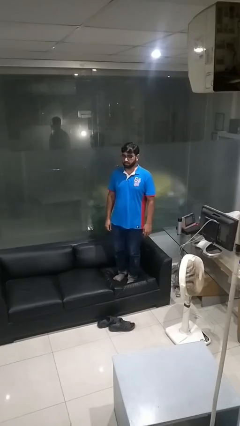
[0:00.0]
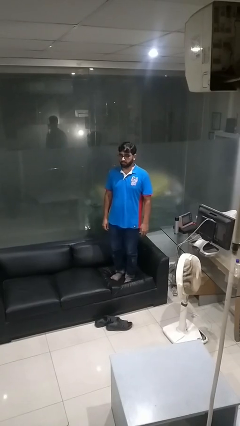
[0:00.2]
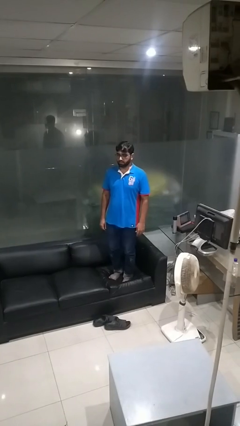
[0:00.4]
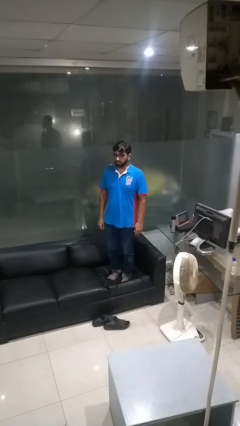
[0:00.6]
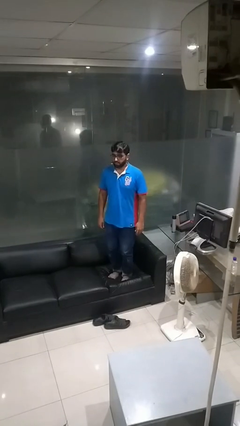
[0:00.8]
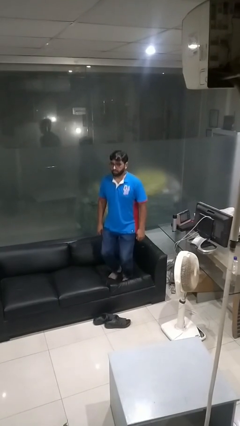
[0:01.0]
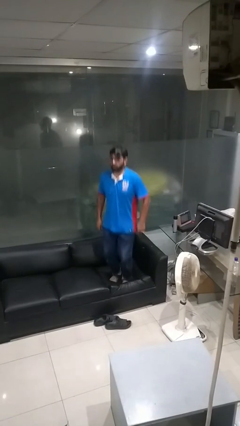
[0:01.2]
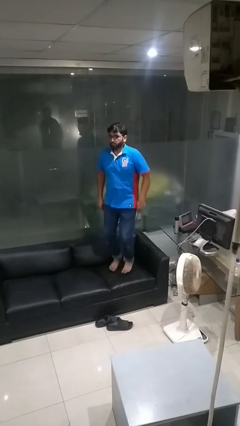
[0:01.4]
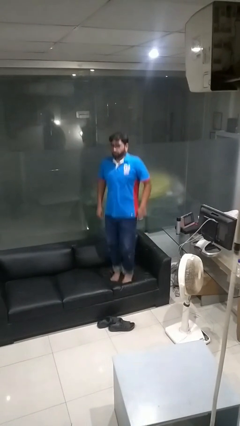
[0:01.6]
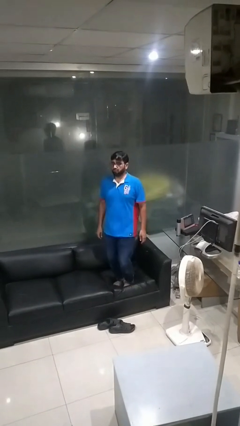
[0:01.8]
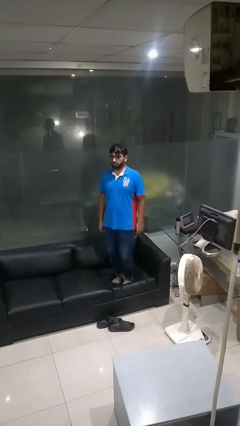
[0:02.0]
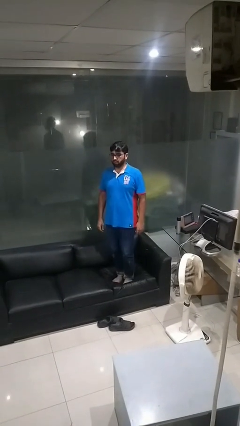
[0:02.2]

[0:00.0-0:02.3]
person jumps on couch

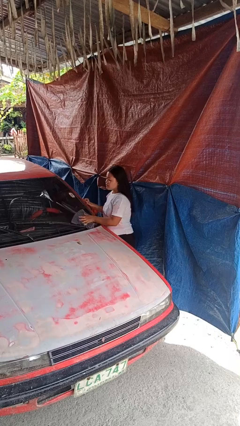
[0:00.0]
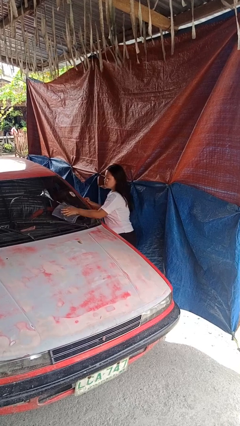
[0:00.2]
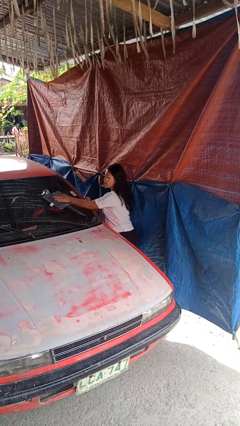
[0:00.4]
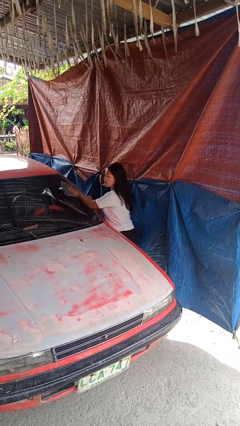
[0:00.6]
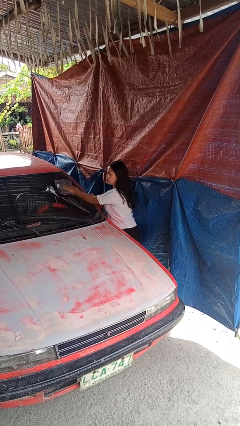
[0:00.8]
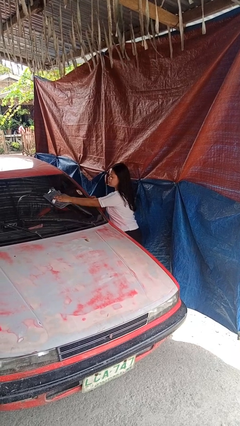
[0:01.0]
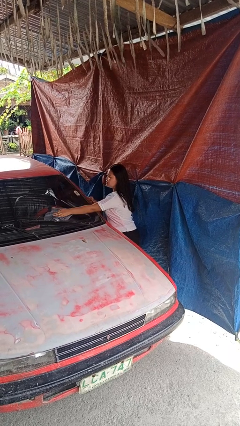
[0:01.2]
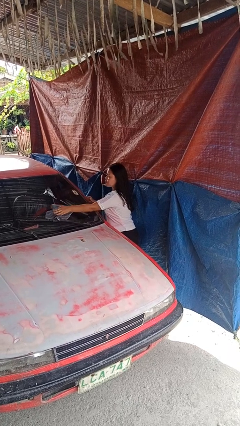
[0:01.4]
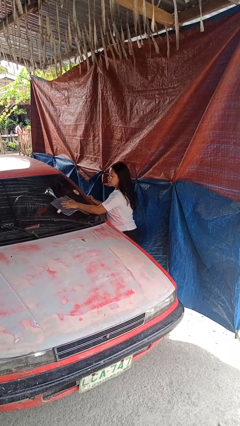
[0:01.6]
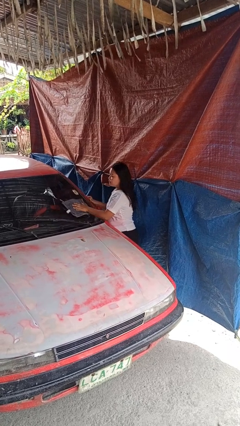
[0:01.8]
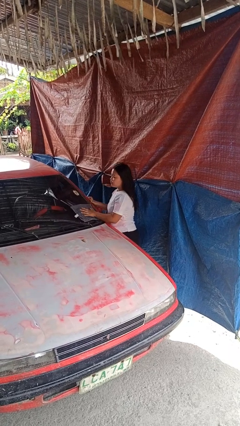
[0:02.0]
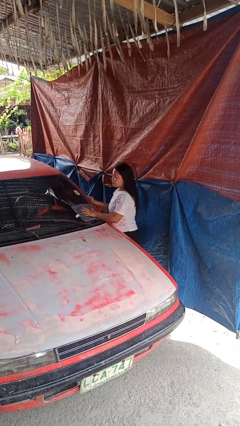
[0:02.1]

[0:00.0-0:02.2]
person polishes car with rag

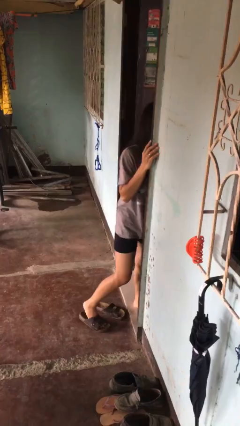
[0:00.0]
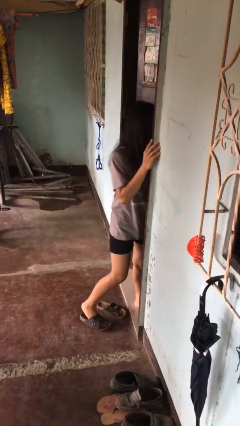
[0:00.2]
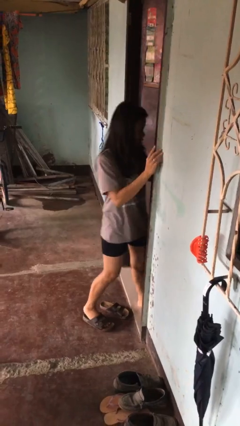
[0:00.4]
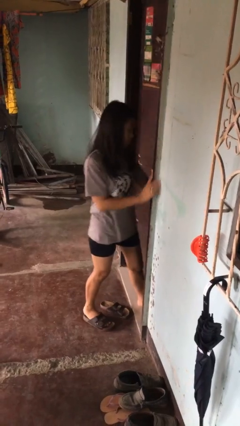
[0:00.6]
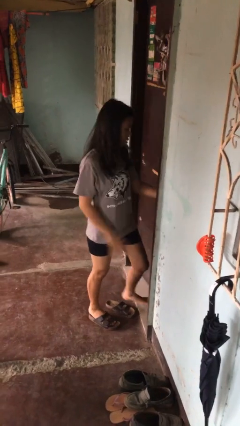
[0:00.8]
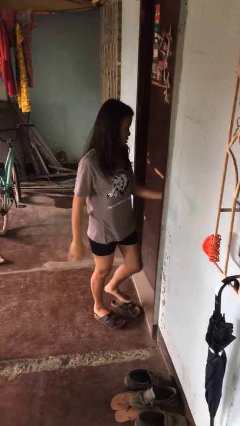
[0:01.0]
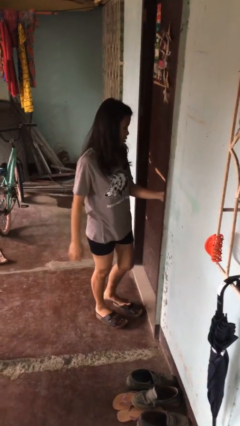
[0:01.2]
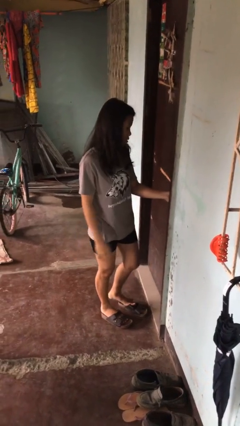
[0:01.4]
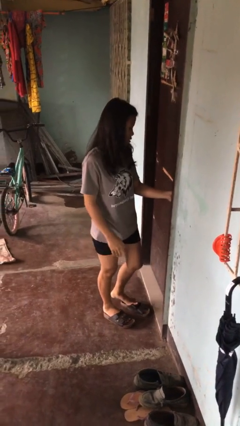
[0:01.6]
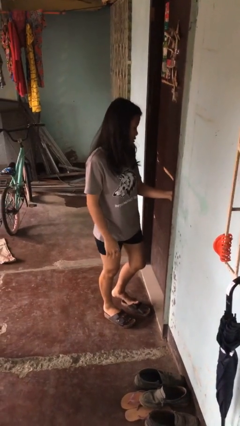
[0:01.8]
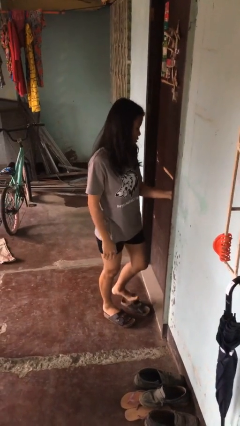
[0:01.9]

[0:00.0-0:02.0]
person closes facility door

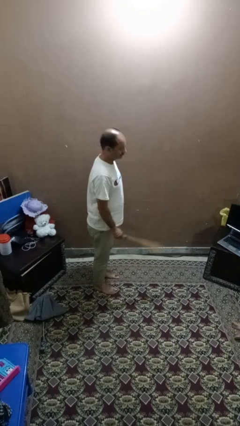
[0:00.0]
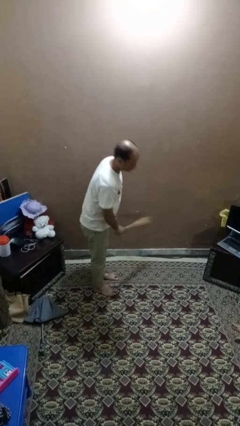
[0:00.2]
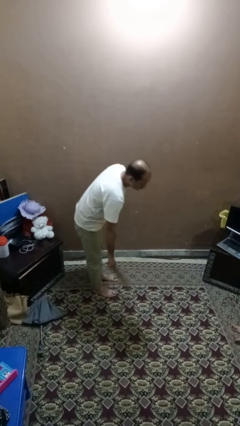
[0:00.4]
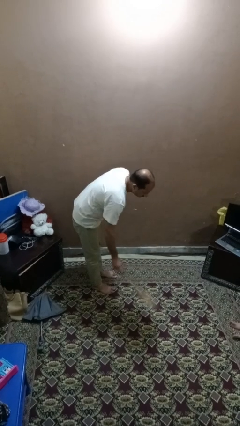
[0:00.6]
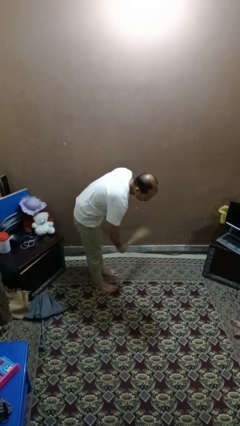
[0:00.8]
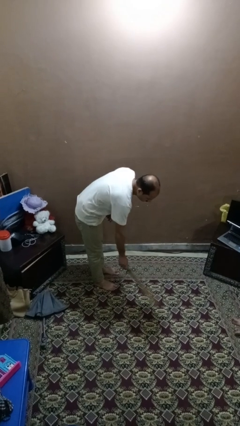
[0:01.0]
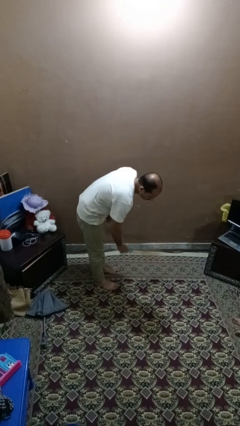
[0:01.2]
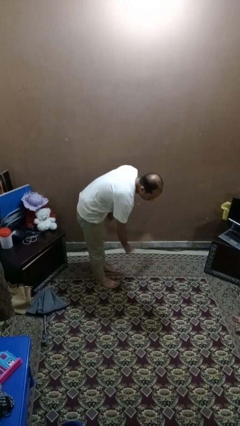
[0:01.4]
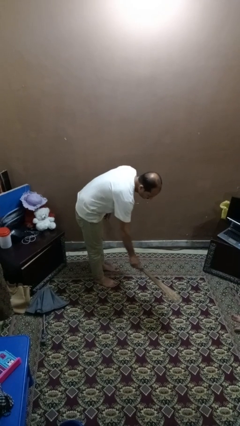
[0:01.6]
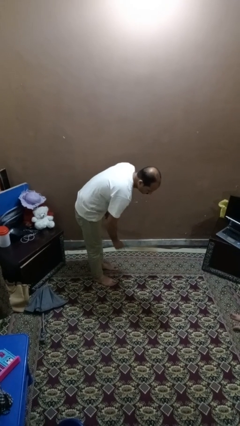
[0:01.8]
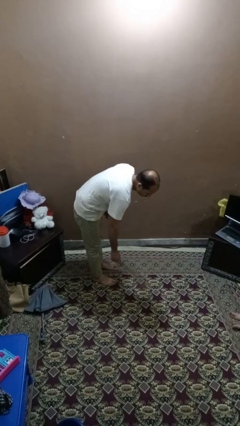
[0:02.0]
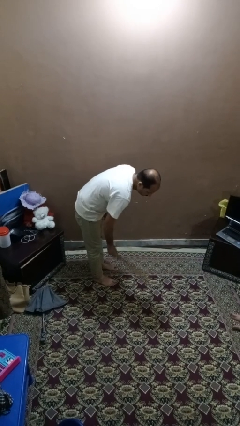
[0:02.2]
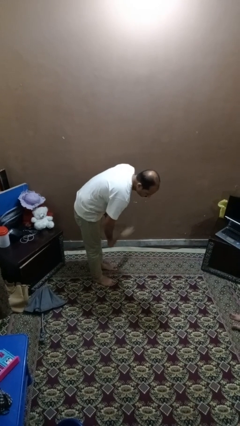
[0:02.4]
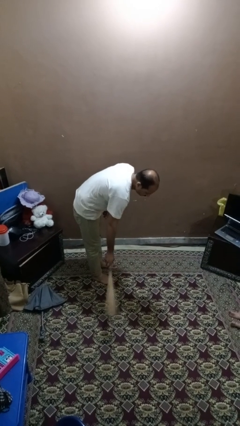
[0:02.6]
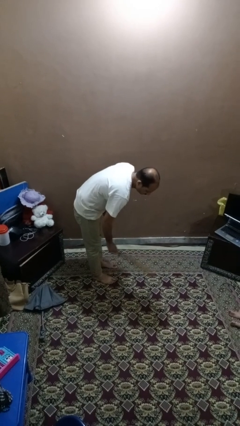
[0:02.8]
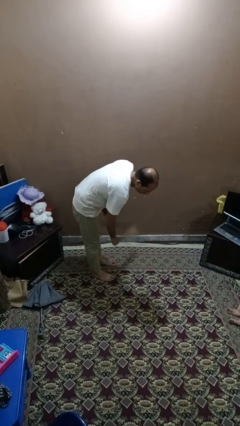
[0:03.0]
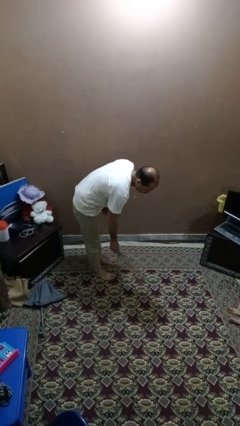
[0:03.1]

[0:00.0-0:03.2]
person sweeps floor

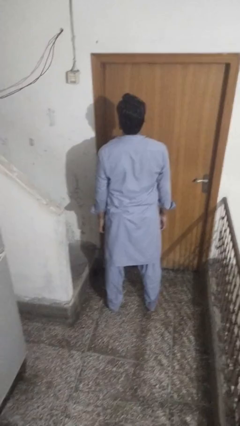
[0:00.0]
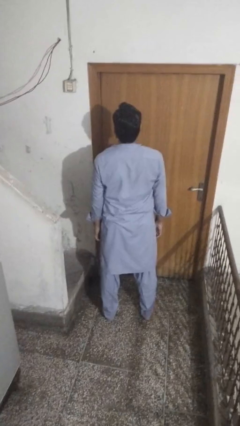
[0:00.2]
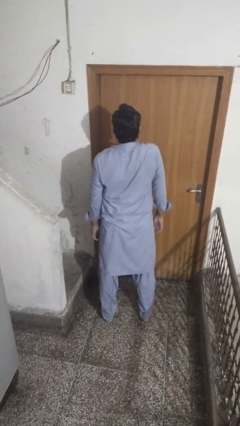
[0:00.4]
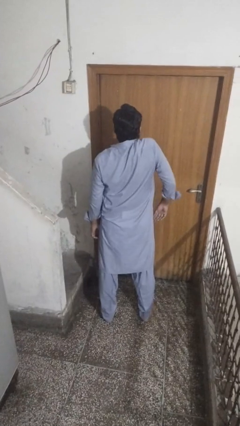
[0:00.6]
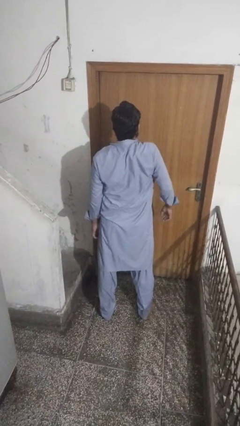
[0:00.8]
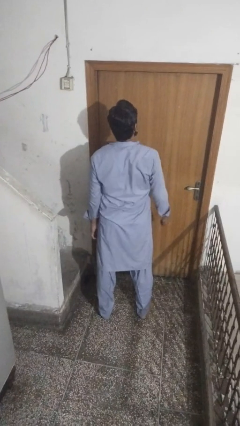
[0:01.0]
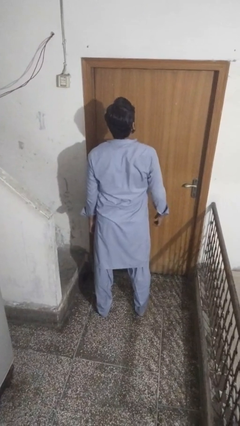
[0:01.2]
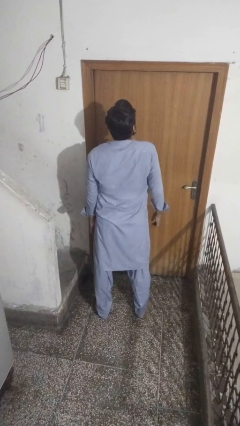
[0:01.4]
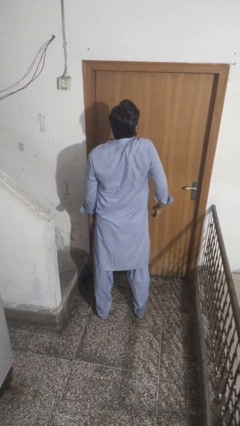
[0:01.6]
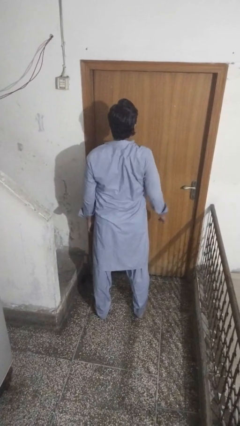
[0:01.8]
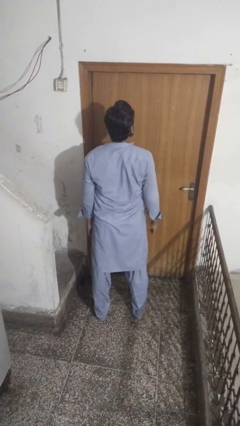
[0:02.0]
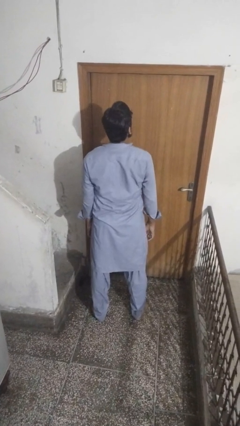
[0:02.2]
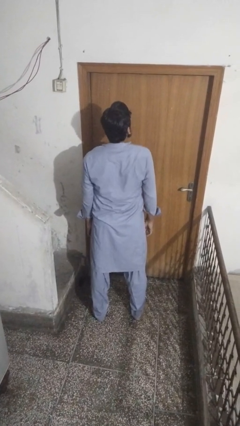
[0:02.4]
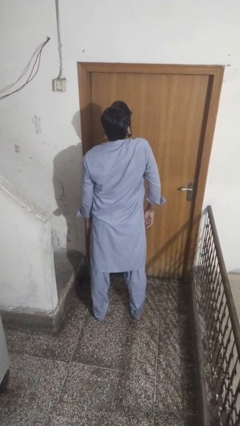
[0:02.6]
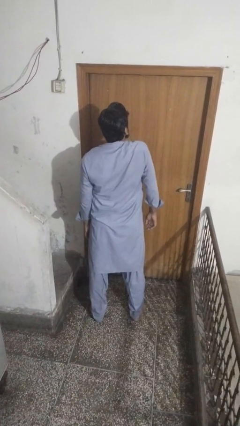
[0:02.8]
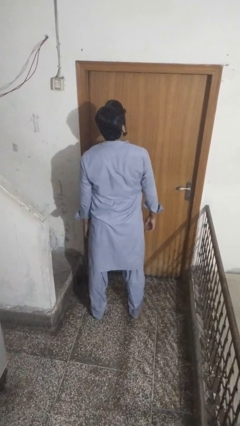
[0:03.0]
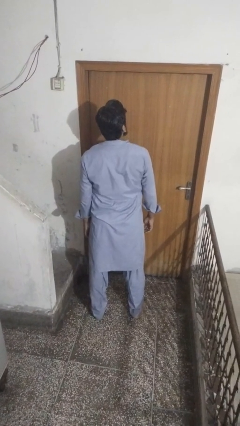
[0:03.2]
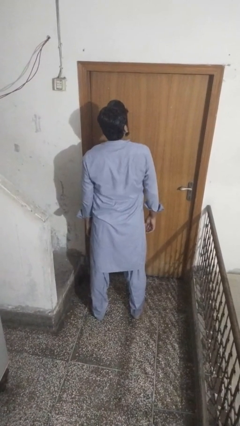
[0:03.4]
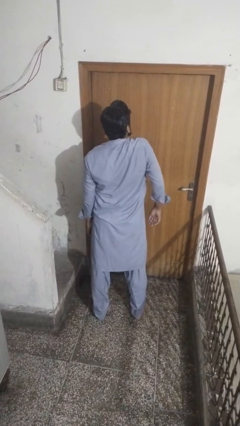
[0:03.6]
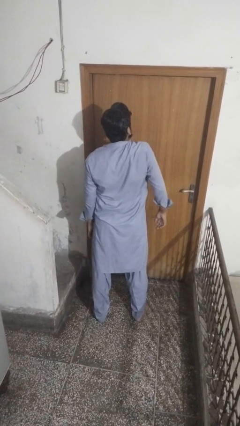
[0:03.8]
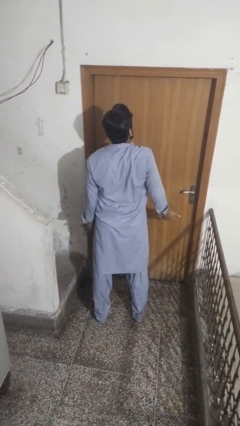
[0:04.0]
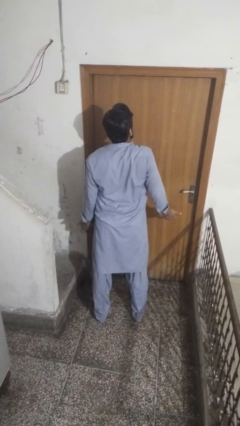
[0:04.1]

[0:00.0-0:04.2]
person shrugs

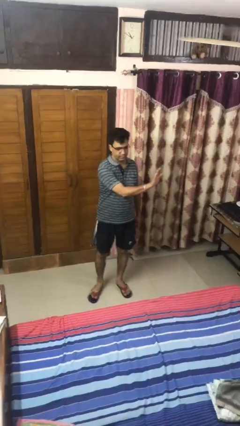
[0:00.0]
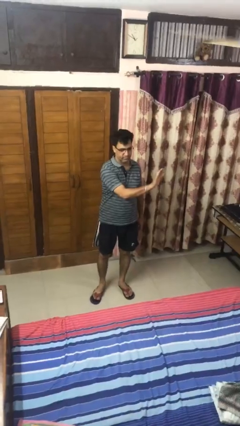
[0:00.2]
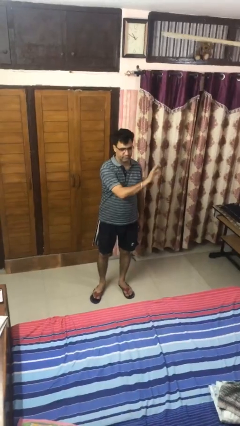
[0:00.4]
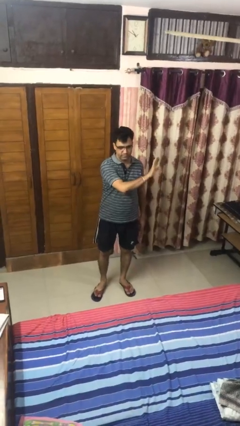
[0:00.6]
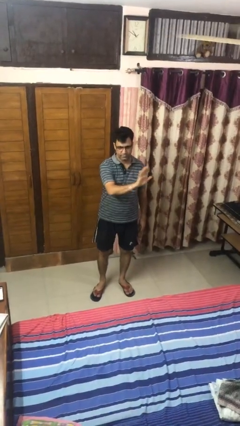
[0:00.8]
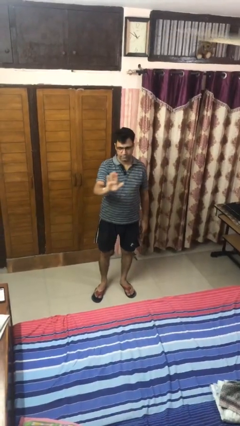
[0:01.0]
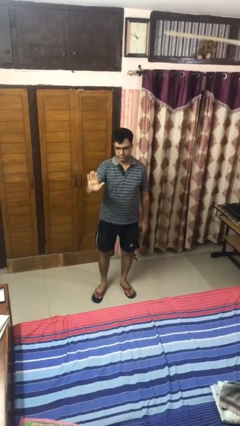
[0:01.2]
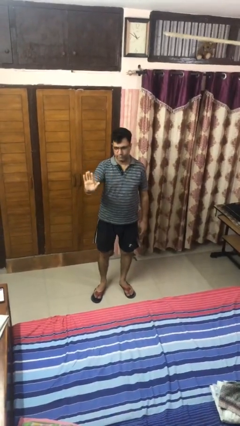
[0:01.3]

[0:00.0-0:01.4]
person gestures swipe right

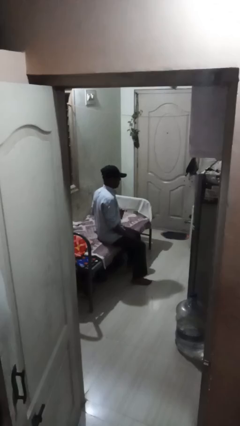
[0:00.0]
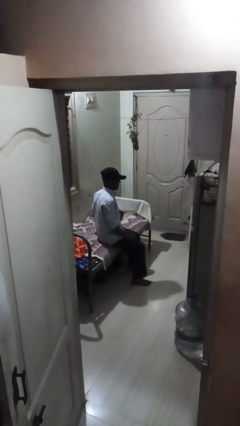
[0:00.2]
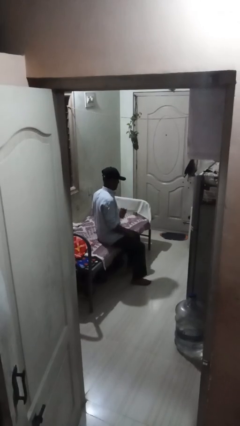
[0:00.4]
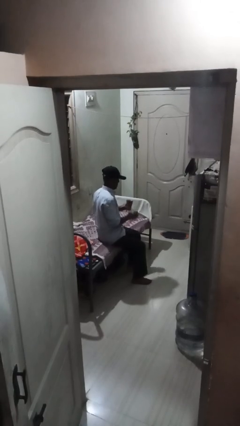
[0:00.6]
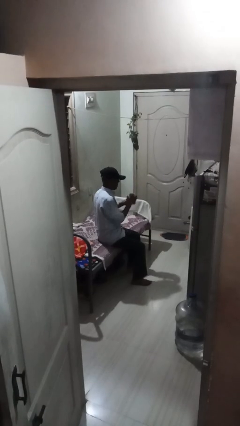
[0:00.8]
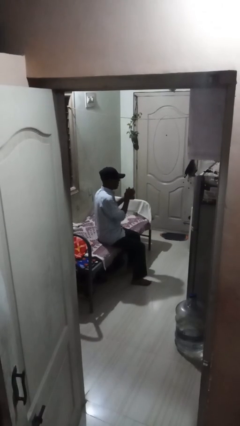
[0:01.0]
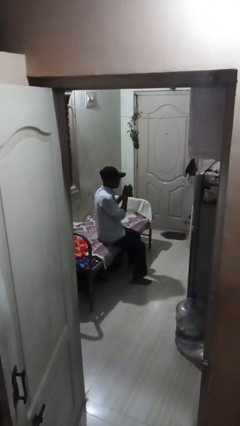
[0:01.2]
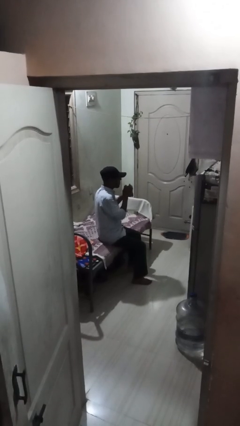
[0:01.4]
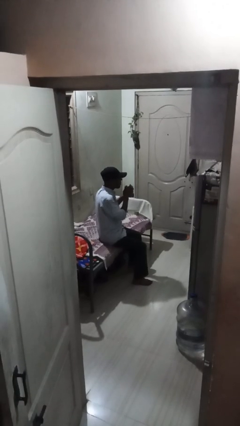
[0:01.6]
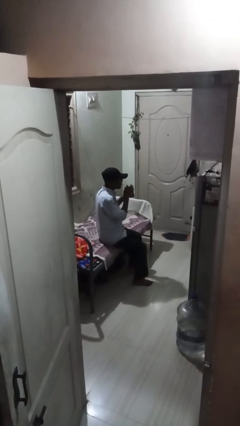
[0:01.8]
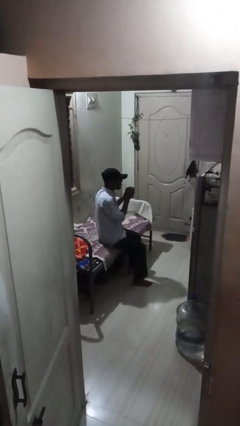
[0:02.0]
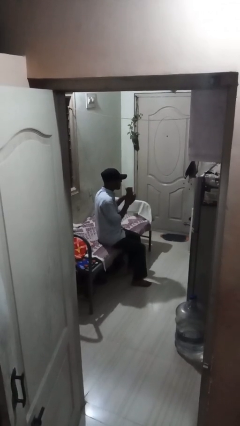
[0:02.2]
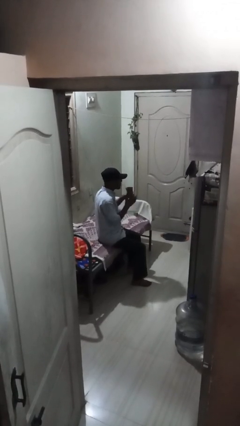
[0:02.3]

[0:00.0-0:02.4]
person drinks from straw
